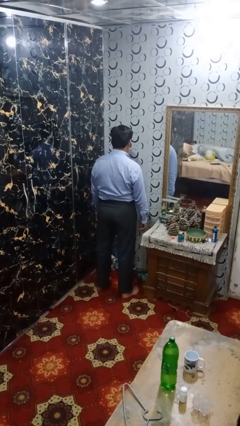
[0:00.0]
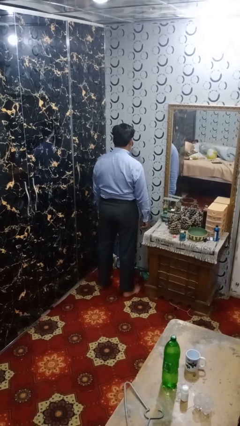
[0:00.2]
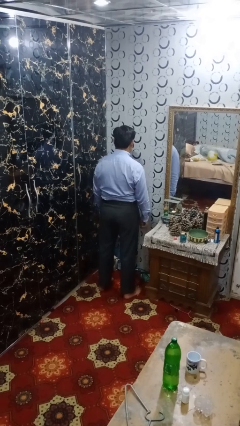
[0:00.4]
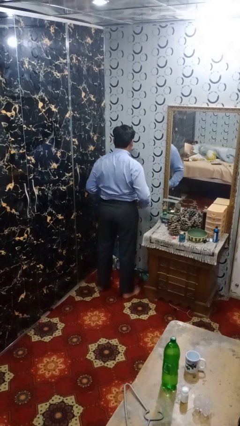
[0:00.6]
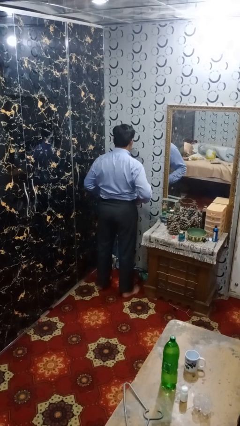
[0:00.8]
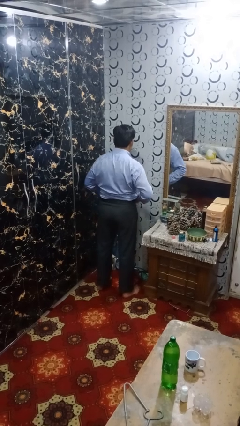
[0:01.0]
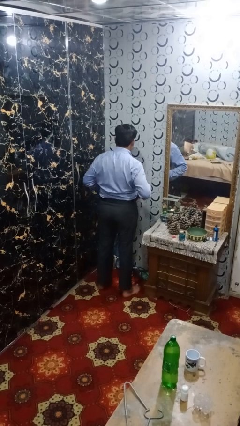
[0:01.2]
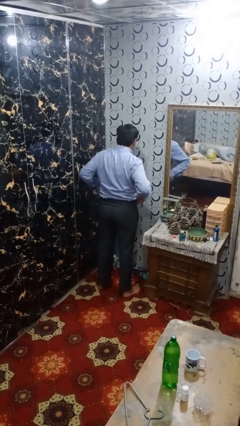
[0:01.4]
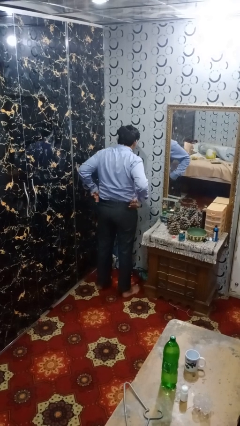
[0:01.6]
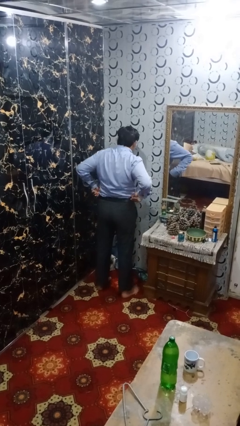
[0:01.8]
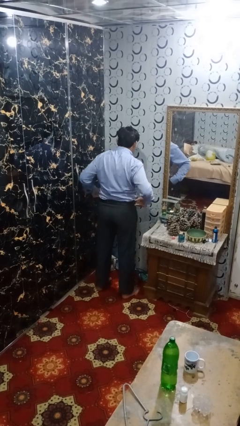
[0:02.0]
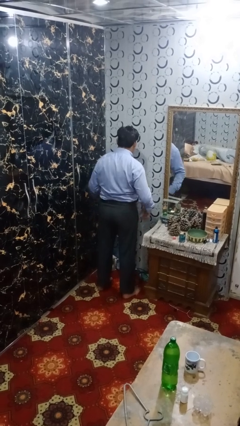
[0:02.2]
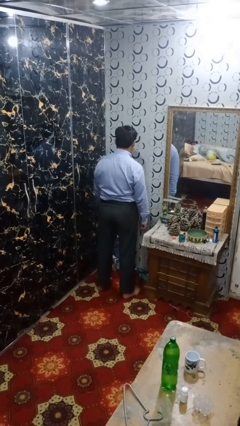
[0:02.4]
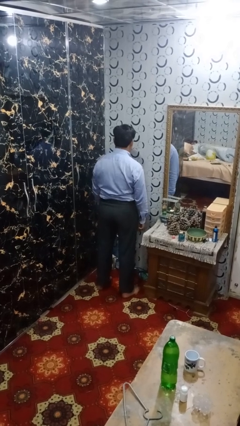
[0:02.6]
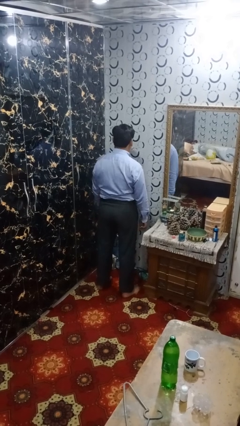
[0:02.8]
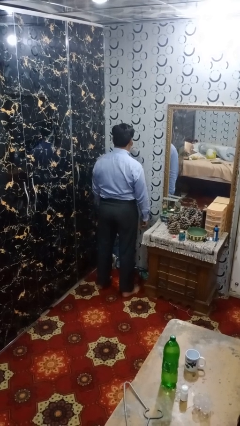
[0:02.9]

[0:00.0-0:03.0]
person hikes up pants

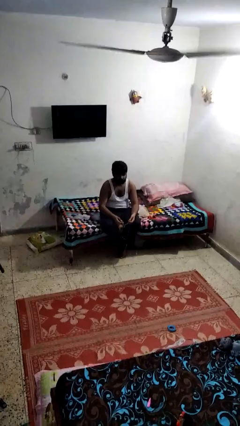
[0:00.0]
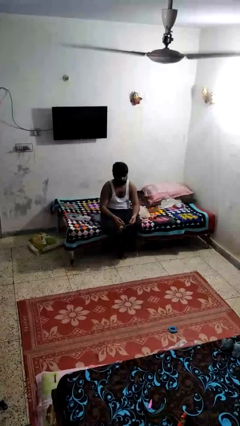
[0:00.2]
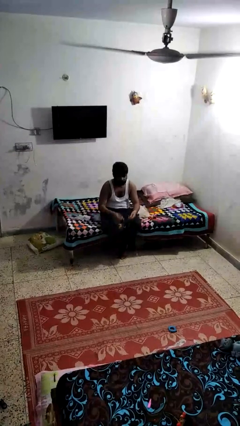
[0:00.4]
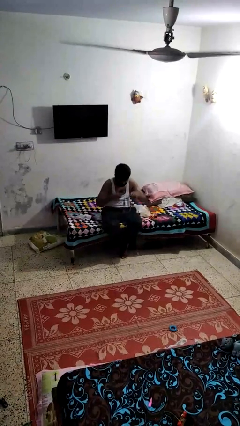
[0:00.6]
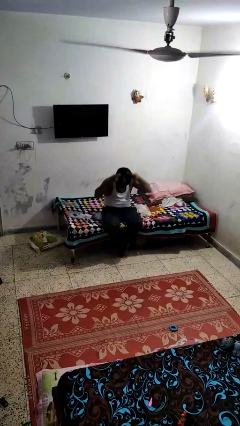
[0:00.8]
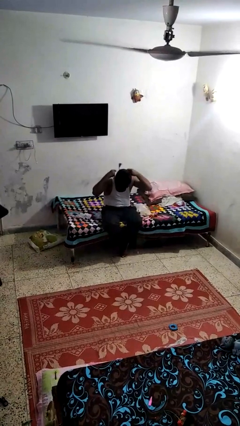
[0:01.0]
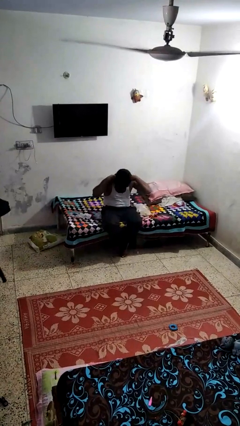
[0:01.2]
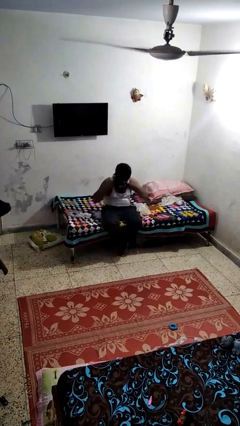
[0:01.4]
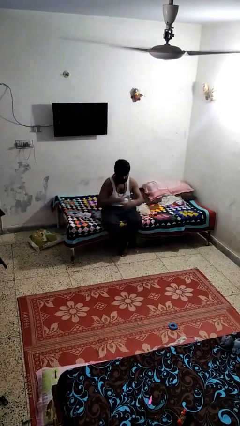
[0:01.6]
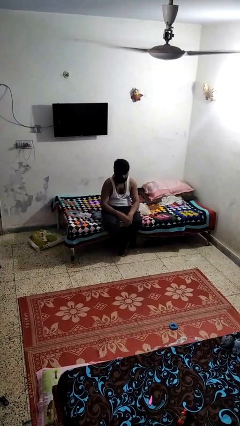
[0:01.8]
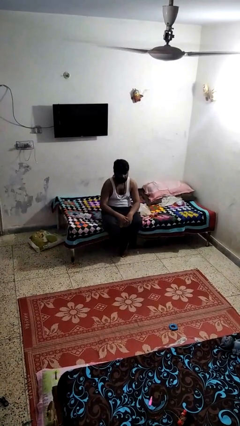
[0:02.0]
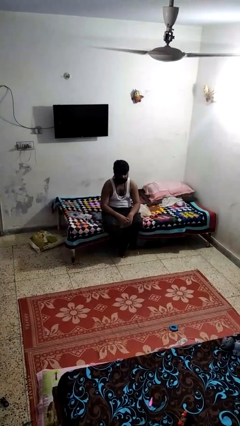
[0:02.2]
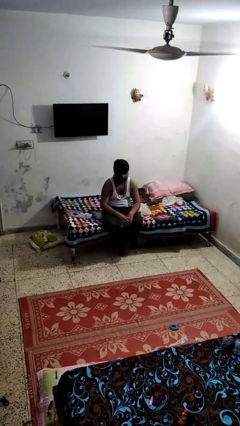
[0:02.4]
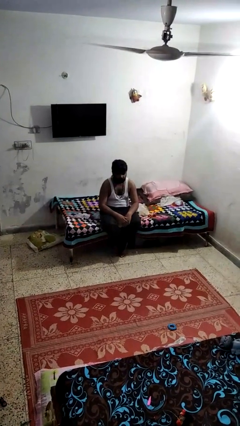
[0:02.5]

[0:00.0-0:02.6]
person puts on necklace

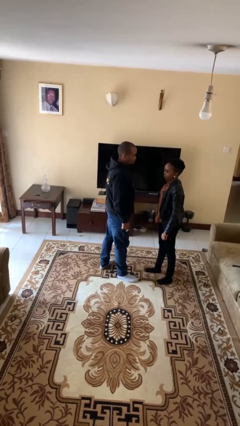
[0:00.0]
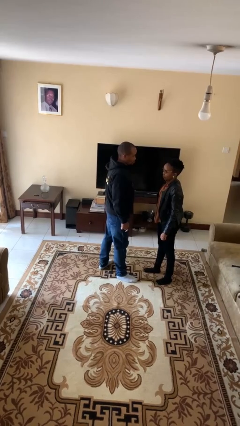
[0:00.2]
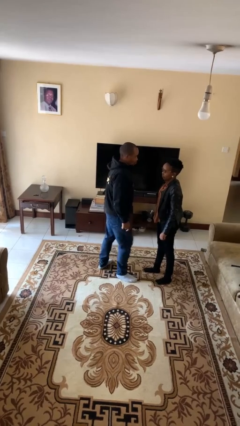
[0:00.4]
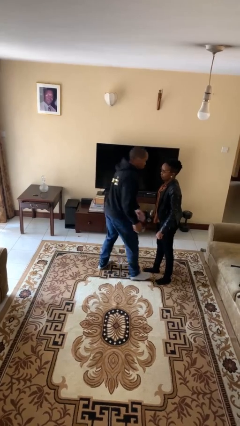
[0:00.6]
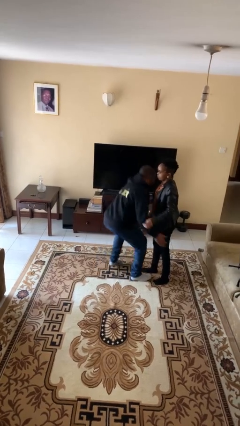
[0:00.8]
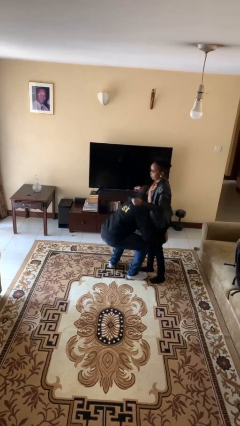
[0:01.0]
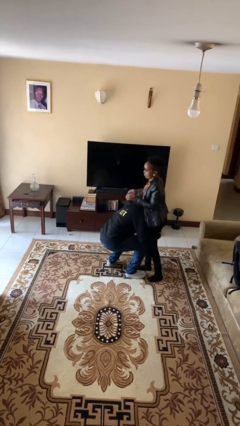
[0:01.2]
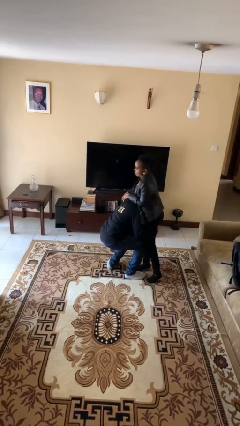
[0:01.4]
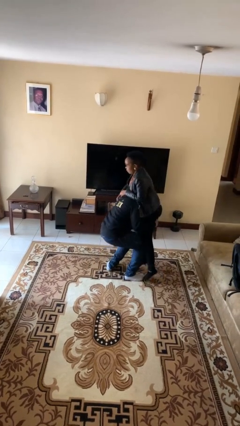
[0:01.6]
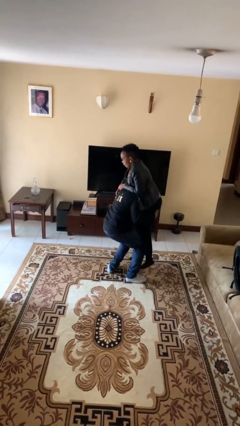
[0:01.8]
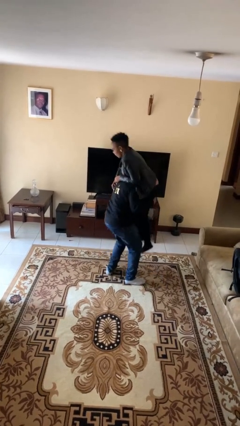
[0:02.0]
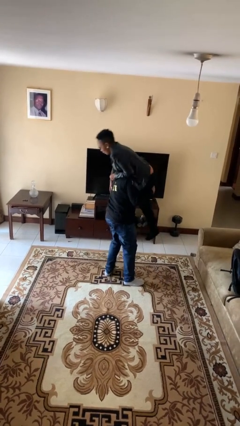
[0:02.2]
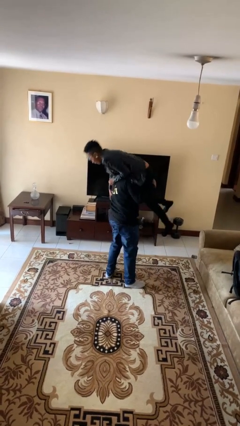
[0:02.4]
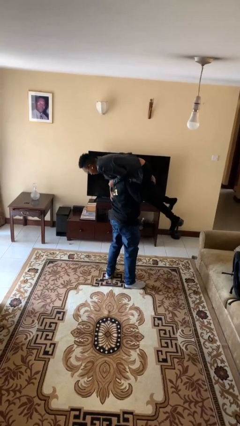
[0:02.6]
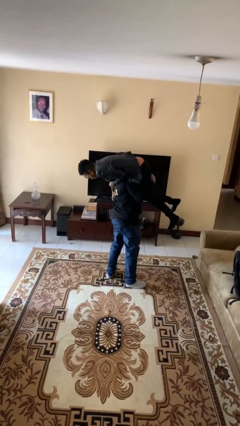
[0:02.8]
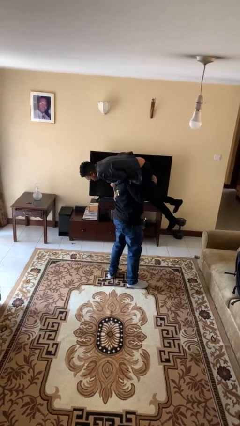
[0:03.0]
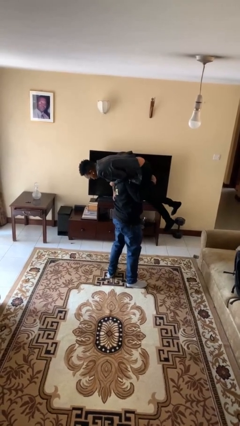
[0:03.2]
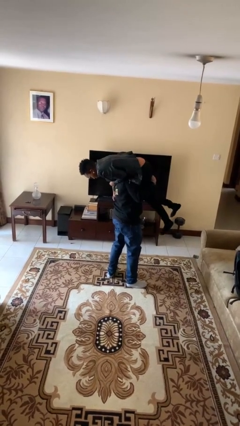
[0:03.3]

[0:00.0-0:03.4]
person carries person over shoulder

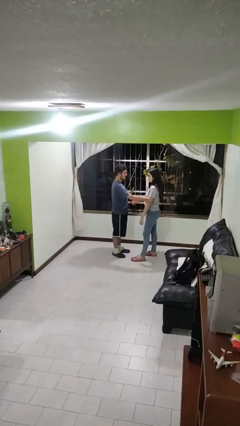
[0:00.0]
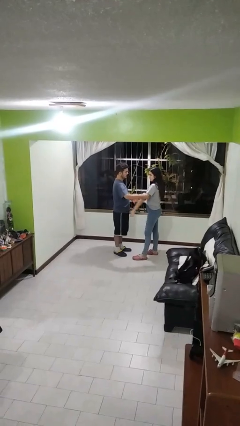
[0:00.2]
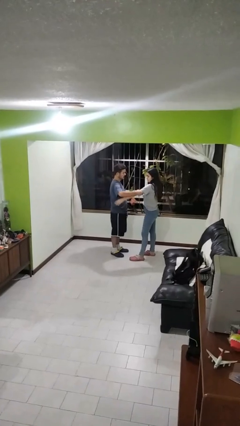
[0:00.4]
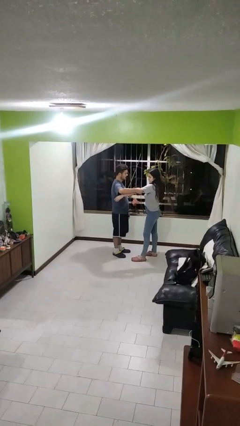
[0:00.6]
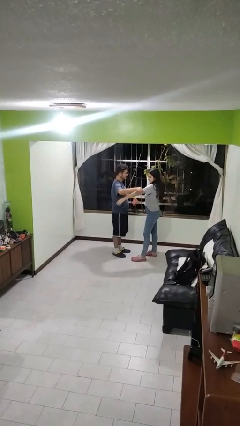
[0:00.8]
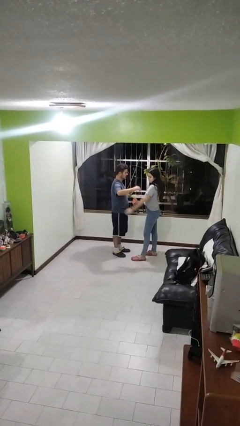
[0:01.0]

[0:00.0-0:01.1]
person grabs person by bicep

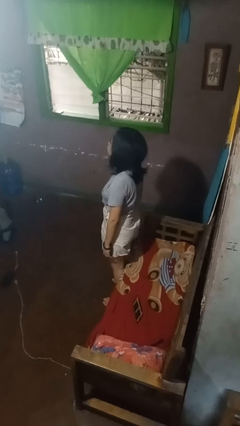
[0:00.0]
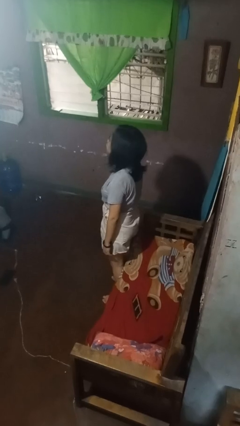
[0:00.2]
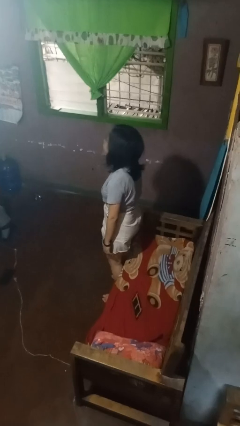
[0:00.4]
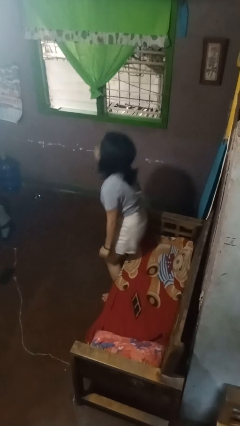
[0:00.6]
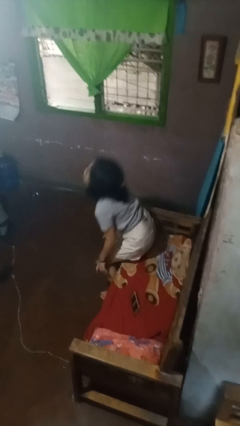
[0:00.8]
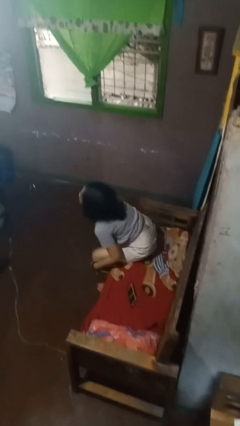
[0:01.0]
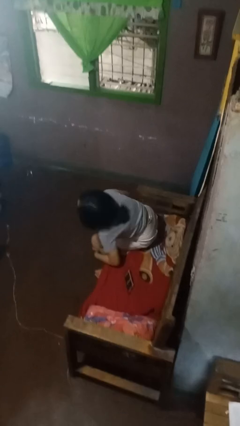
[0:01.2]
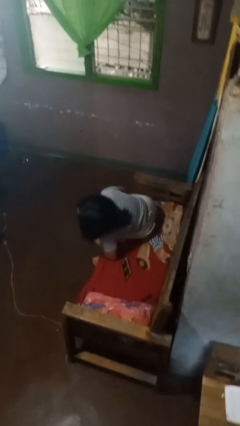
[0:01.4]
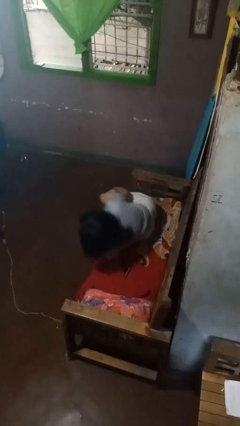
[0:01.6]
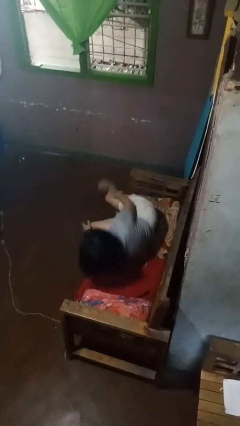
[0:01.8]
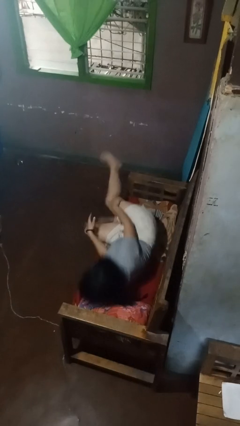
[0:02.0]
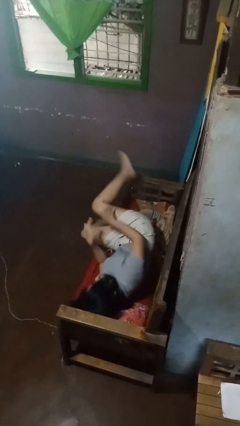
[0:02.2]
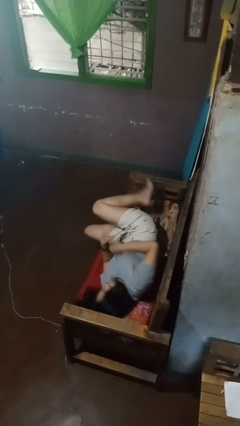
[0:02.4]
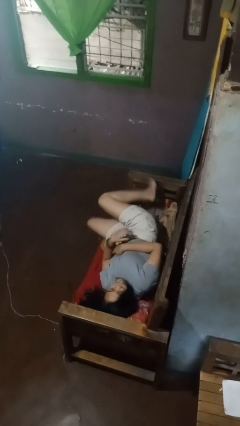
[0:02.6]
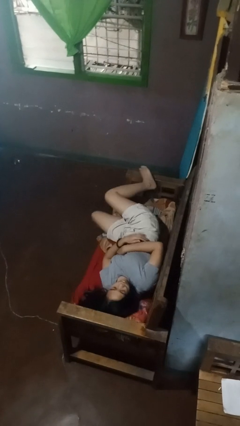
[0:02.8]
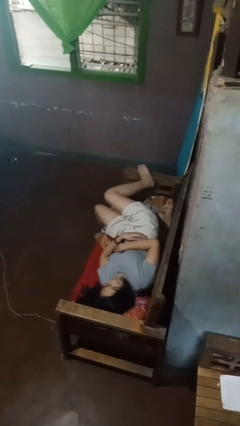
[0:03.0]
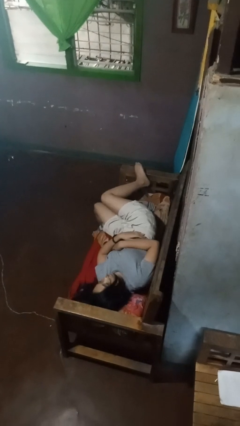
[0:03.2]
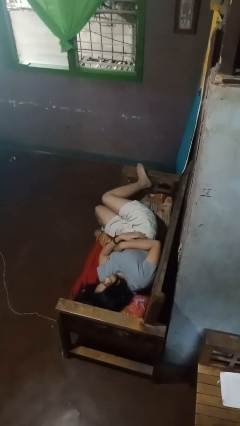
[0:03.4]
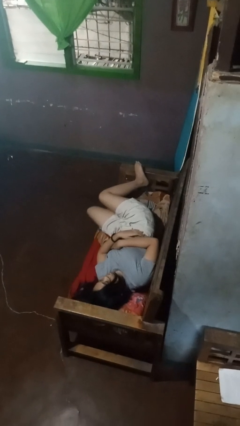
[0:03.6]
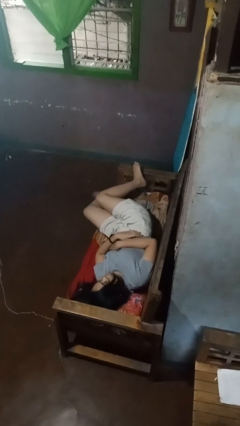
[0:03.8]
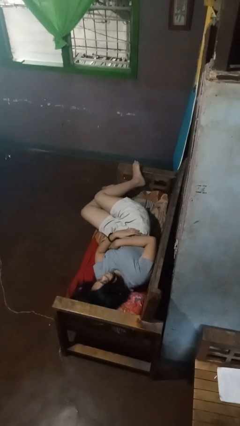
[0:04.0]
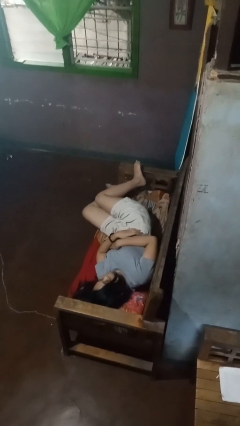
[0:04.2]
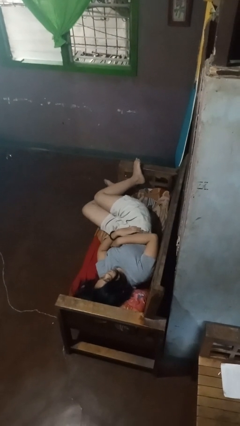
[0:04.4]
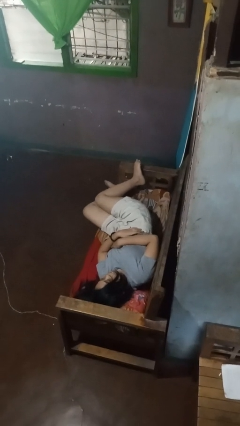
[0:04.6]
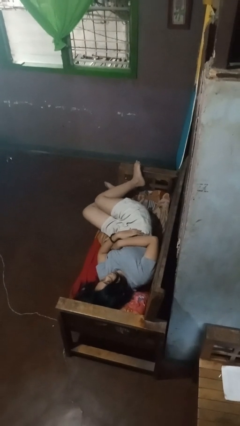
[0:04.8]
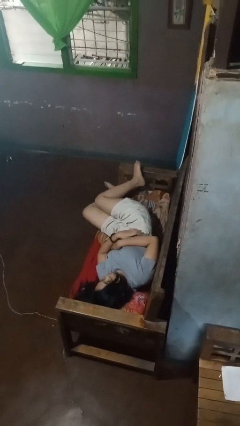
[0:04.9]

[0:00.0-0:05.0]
person lies down on bed

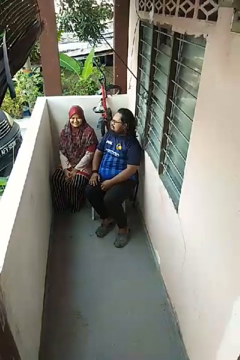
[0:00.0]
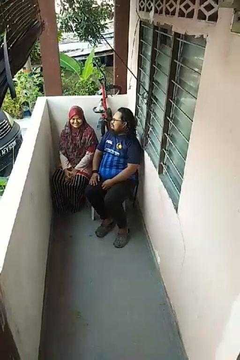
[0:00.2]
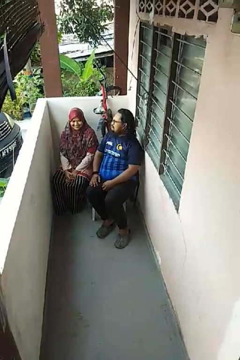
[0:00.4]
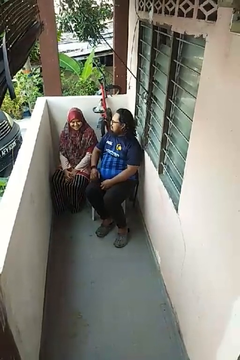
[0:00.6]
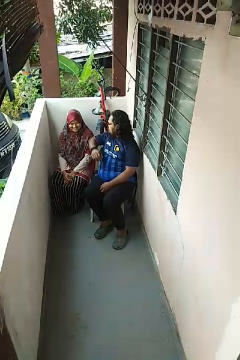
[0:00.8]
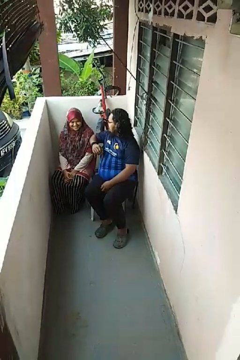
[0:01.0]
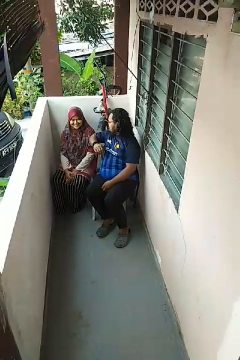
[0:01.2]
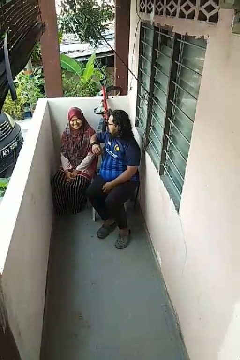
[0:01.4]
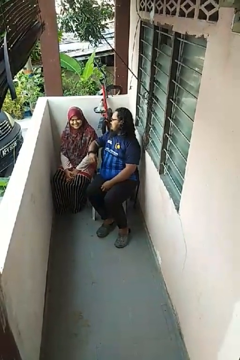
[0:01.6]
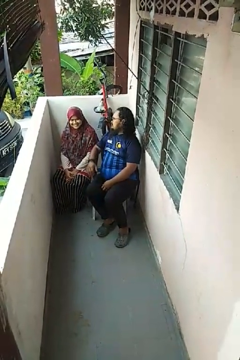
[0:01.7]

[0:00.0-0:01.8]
person nudges person with elbow

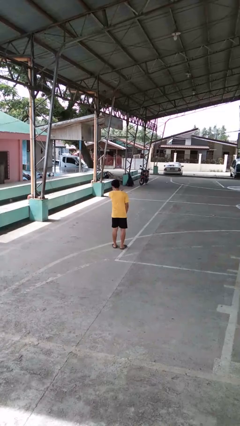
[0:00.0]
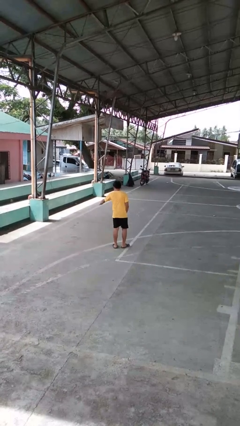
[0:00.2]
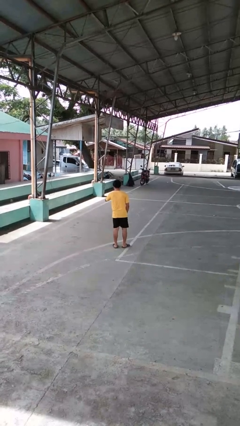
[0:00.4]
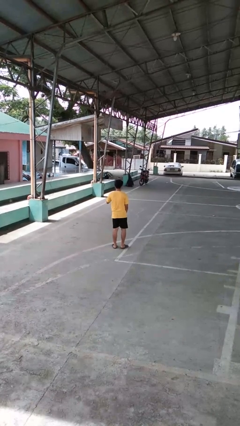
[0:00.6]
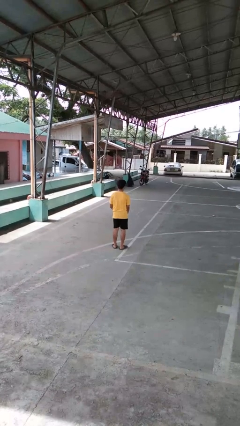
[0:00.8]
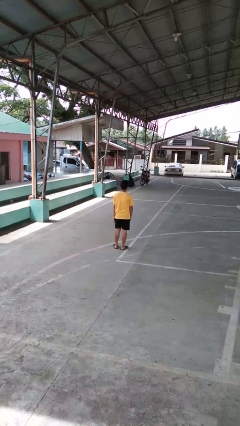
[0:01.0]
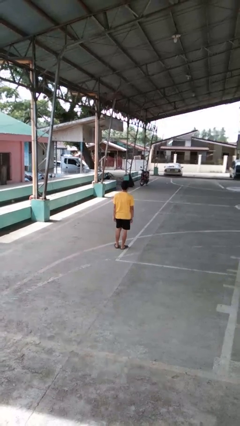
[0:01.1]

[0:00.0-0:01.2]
person karate chop
